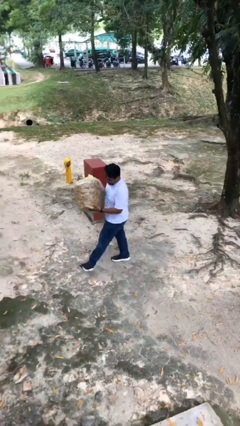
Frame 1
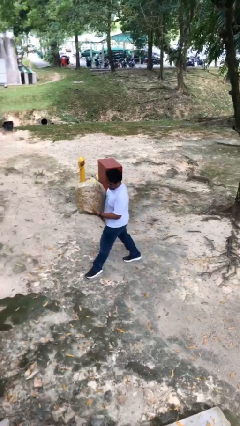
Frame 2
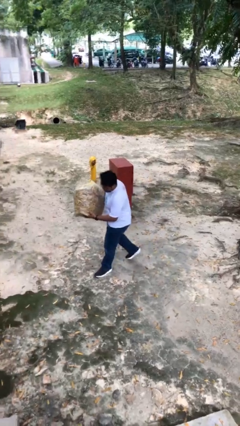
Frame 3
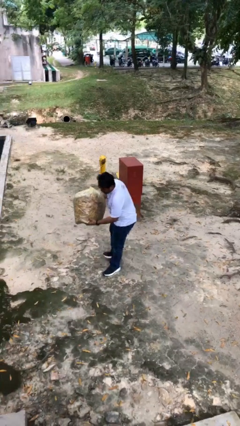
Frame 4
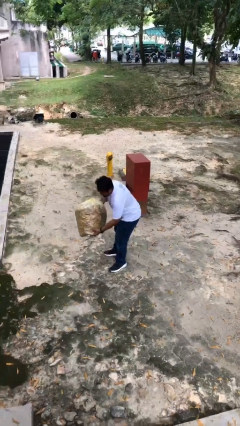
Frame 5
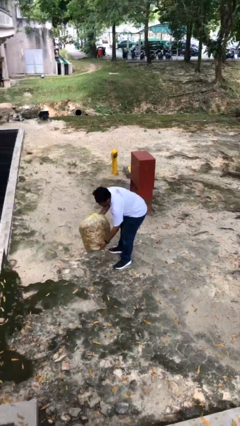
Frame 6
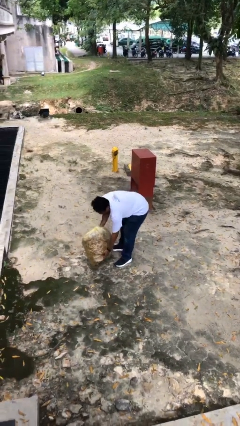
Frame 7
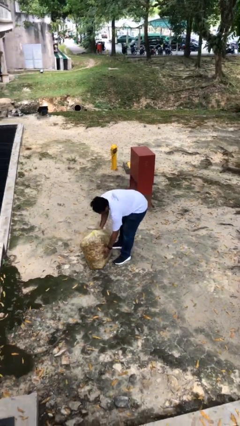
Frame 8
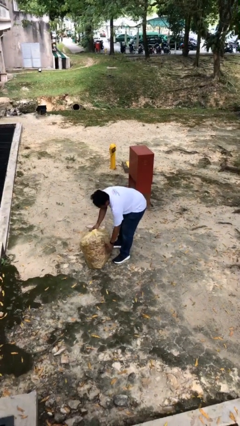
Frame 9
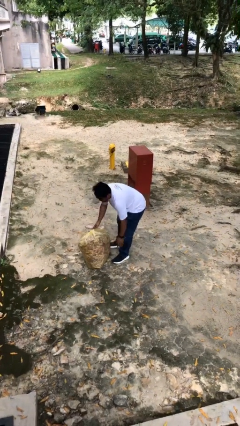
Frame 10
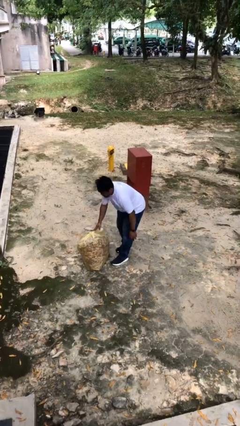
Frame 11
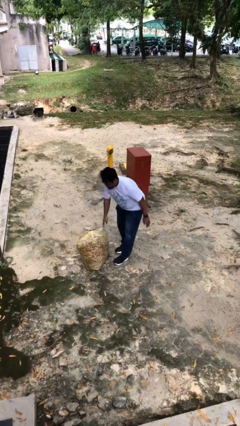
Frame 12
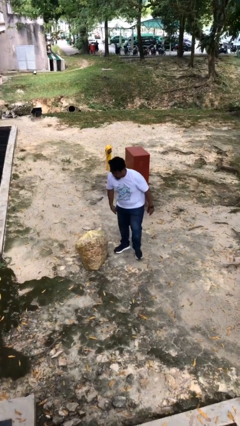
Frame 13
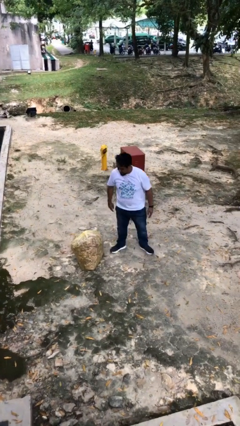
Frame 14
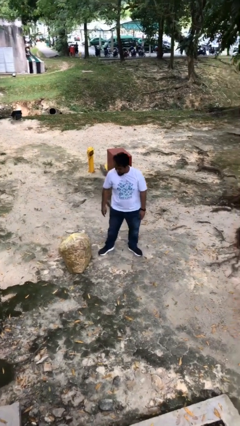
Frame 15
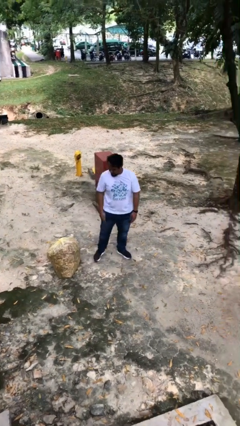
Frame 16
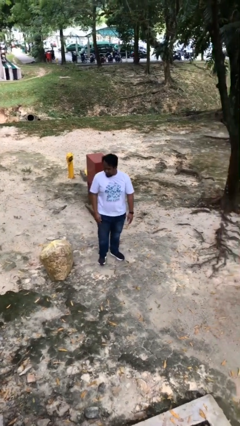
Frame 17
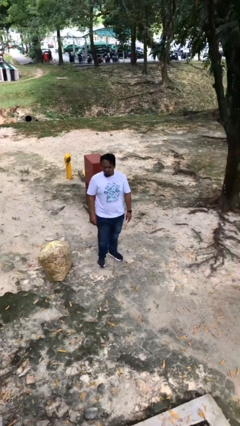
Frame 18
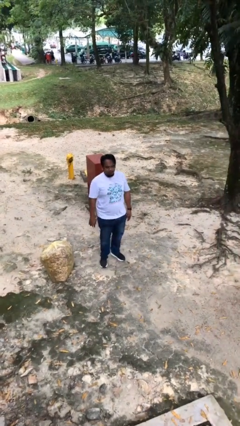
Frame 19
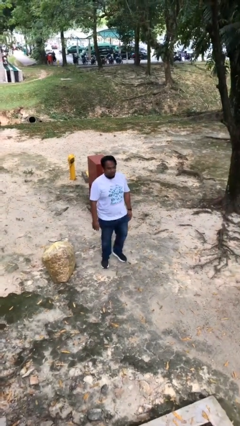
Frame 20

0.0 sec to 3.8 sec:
person puts down object on floor

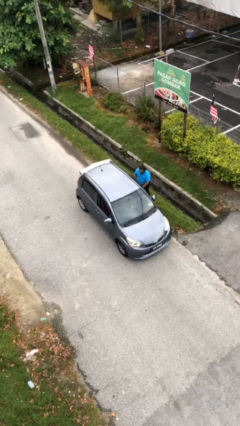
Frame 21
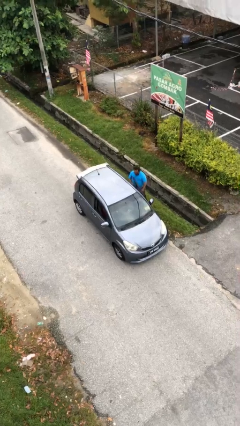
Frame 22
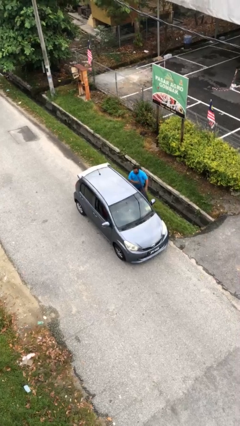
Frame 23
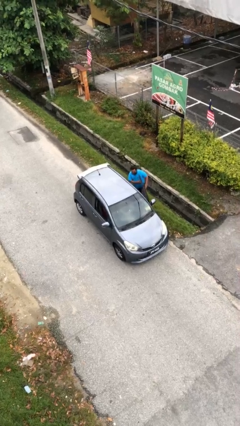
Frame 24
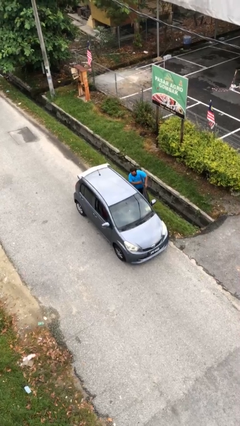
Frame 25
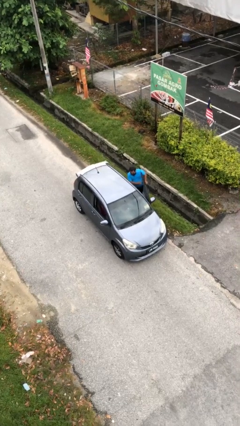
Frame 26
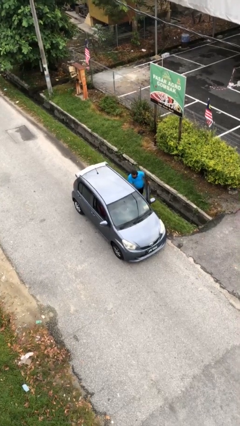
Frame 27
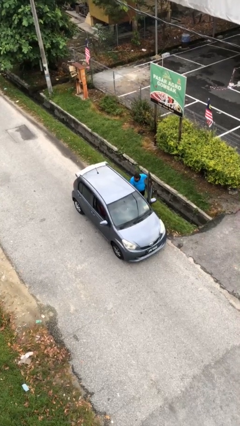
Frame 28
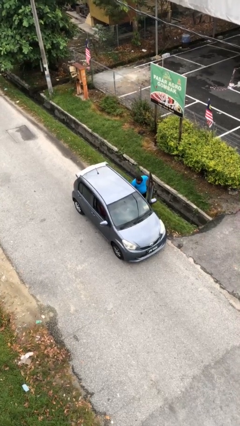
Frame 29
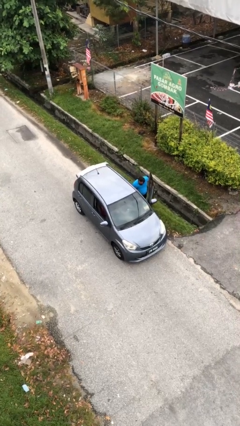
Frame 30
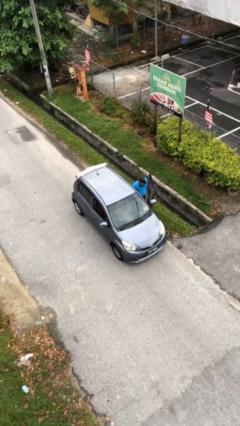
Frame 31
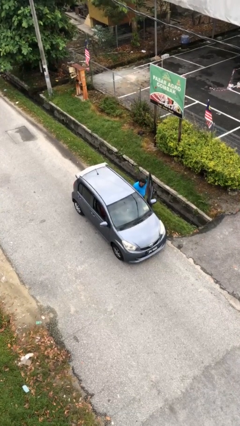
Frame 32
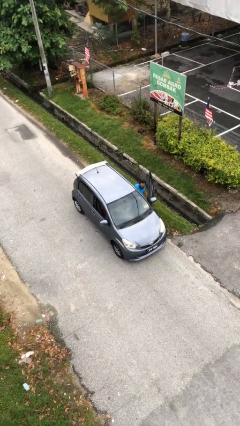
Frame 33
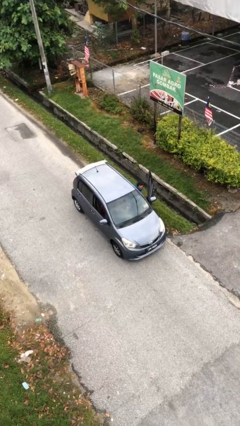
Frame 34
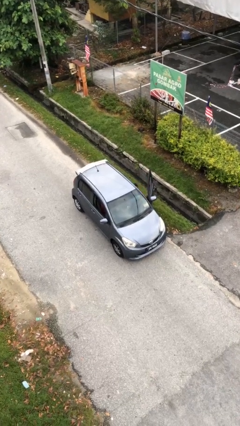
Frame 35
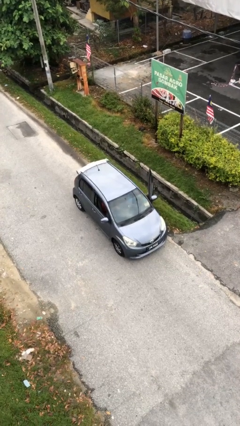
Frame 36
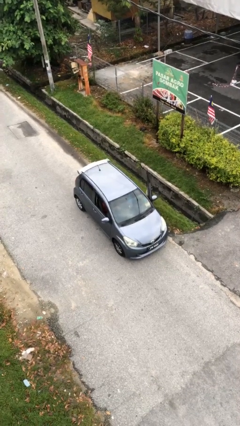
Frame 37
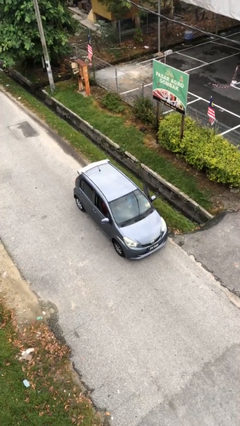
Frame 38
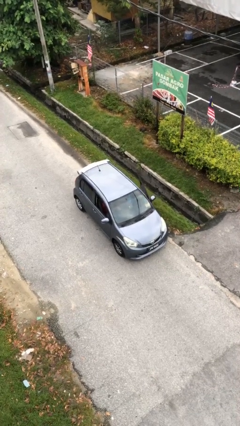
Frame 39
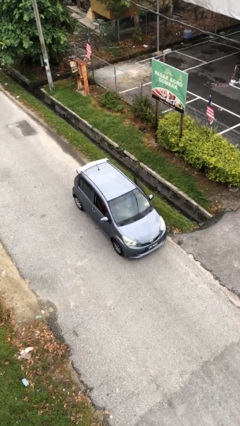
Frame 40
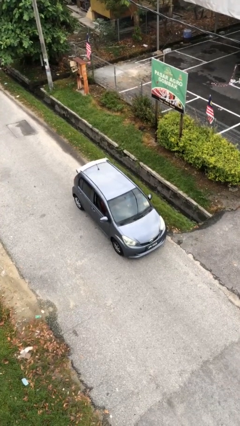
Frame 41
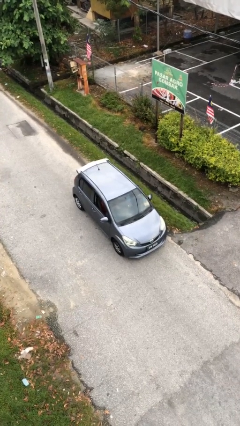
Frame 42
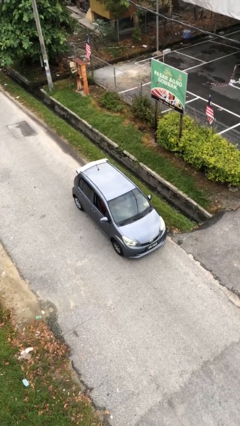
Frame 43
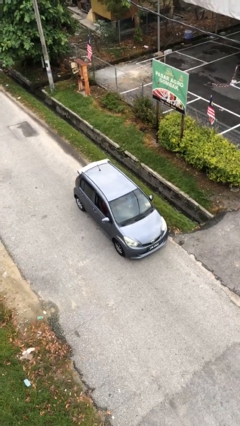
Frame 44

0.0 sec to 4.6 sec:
car picks up person

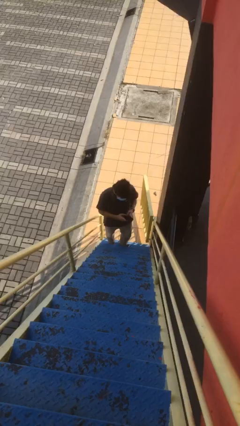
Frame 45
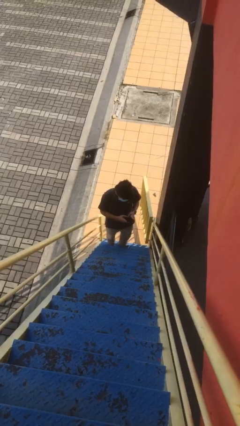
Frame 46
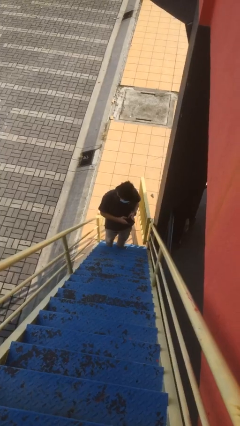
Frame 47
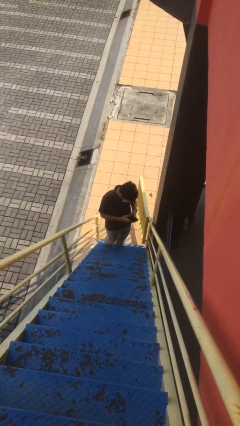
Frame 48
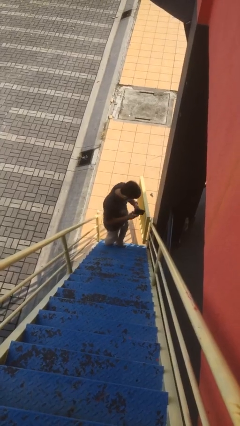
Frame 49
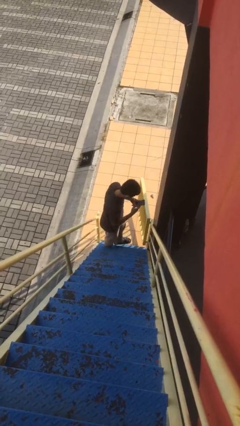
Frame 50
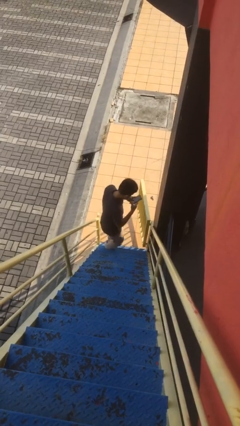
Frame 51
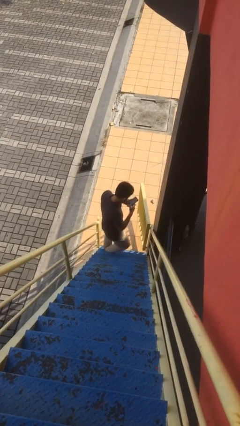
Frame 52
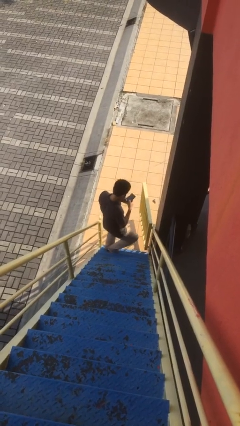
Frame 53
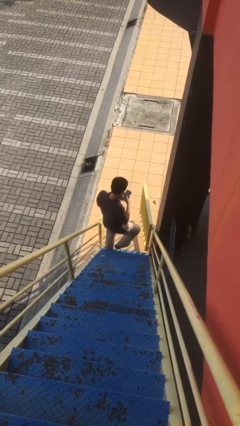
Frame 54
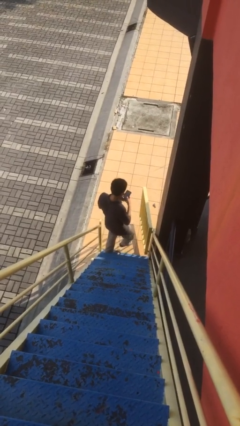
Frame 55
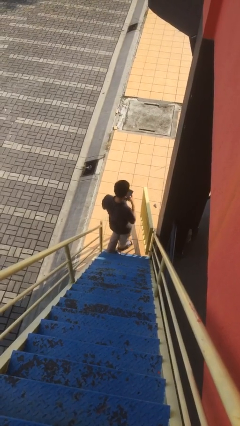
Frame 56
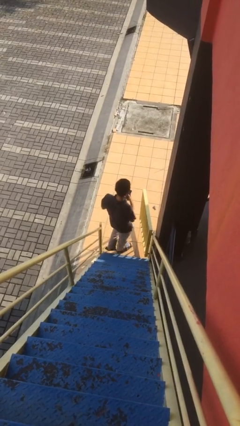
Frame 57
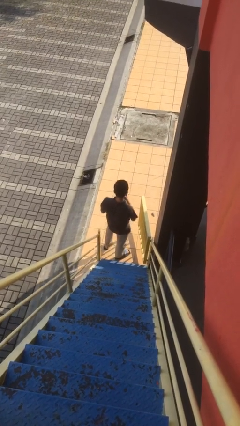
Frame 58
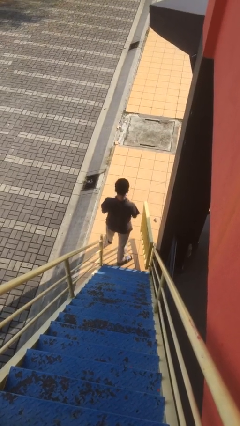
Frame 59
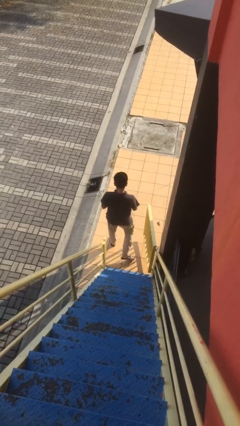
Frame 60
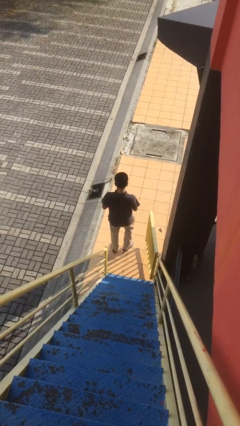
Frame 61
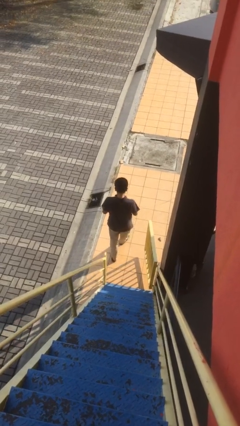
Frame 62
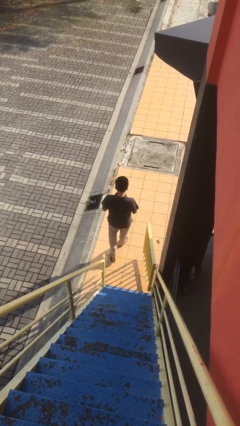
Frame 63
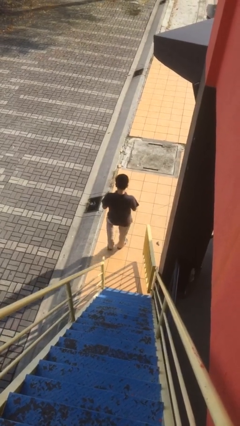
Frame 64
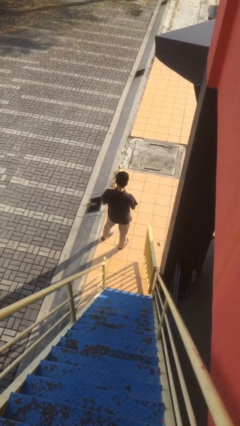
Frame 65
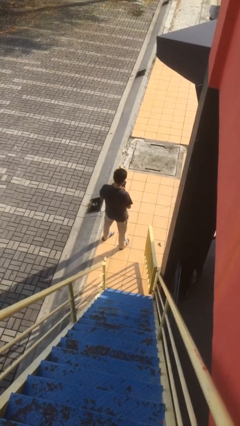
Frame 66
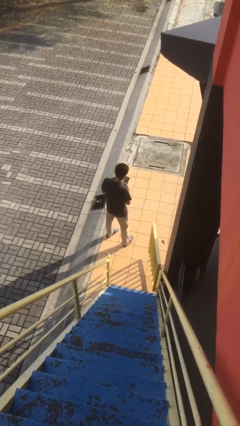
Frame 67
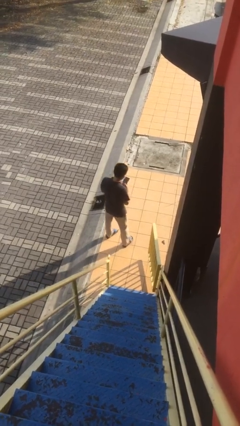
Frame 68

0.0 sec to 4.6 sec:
person exits scene through structure

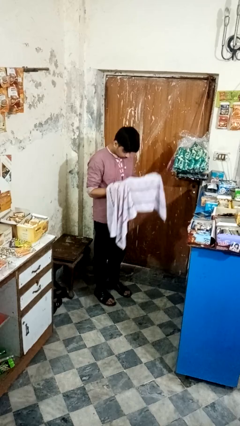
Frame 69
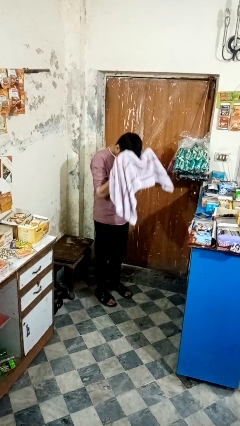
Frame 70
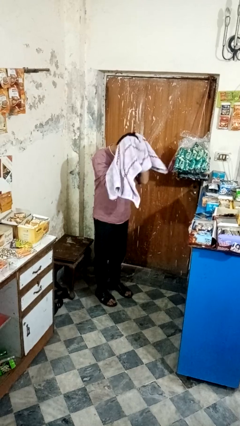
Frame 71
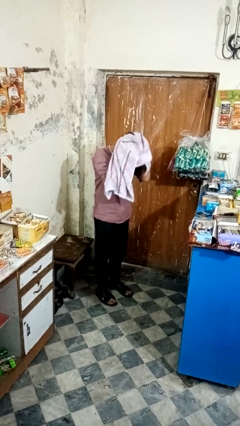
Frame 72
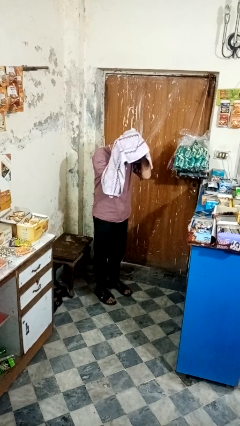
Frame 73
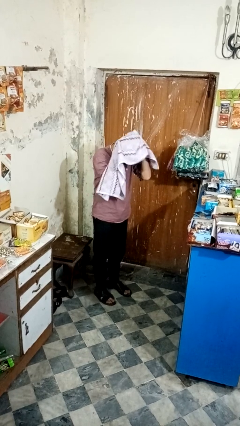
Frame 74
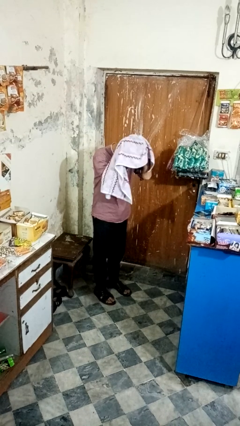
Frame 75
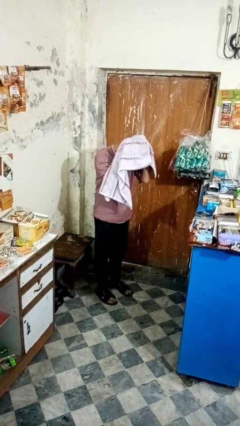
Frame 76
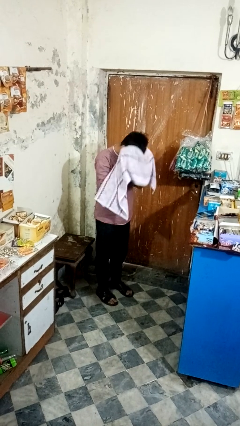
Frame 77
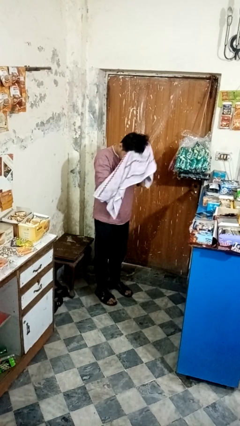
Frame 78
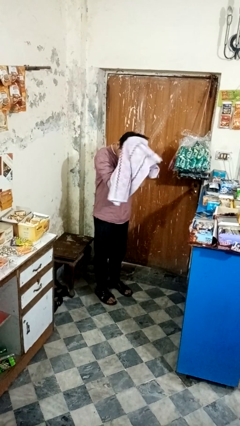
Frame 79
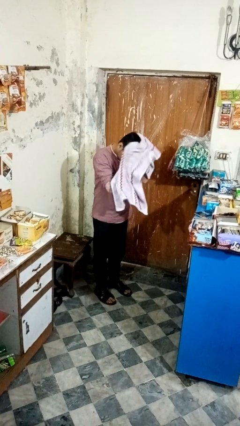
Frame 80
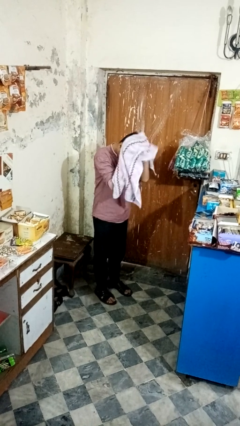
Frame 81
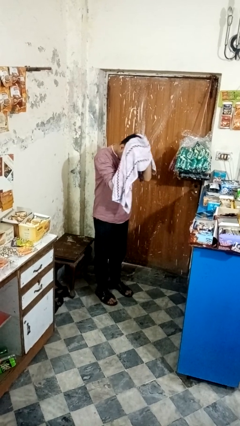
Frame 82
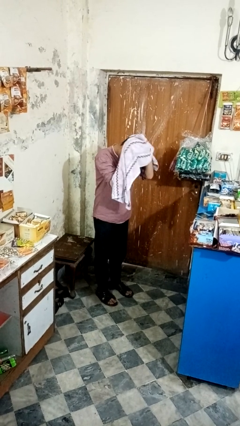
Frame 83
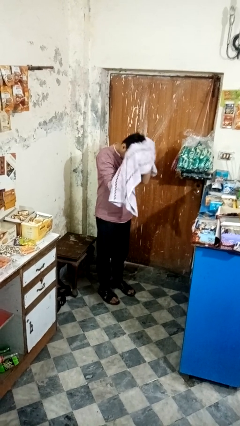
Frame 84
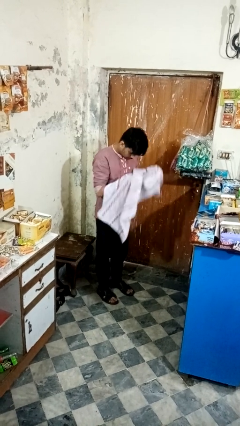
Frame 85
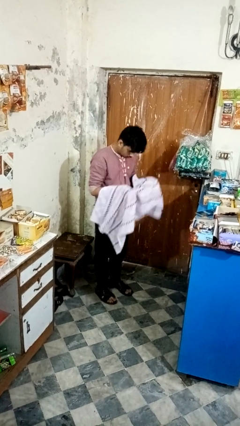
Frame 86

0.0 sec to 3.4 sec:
person dries hair with towel

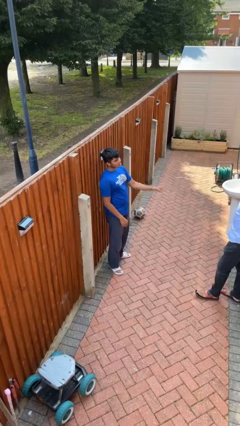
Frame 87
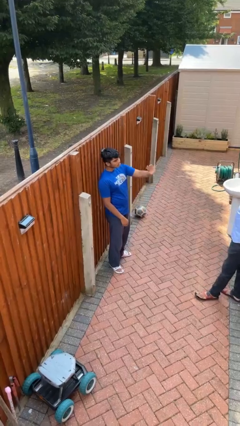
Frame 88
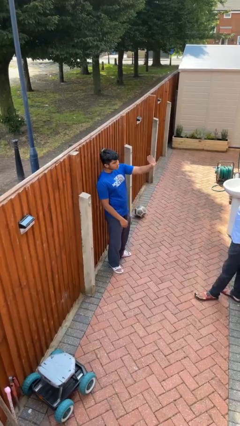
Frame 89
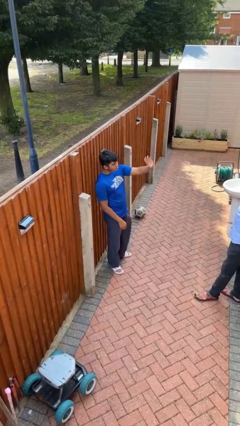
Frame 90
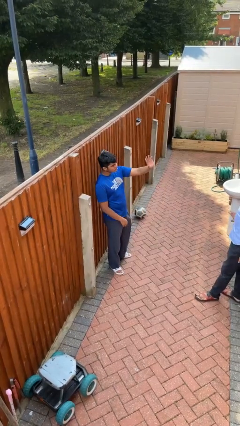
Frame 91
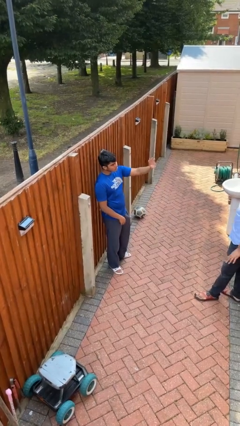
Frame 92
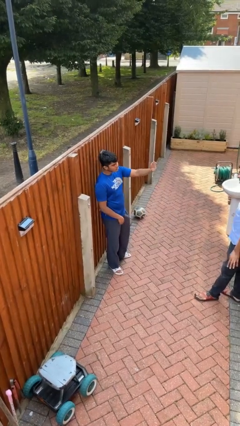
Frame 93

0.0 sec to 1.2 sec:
person waves at person
